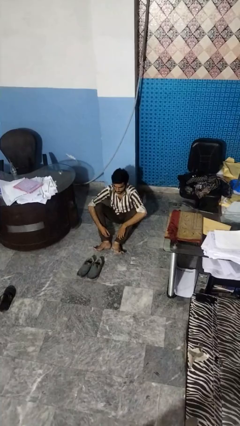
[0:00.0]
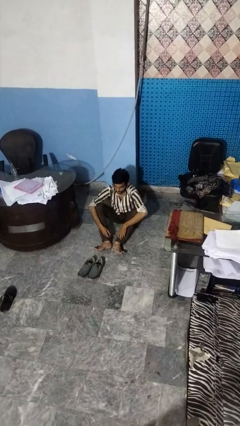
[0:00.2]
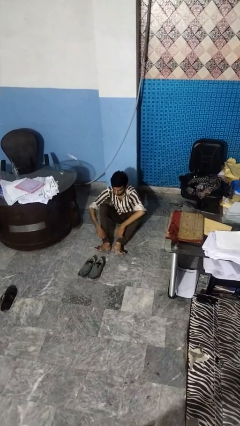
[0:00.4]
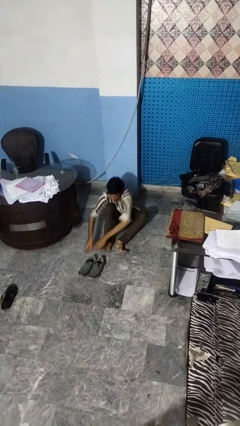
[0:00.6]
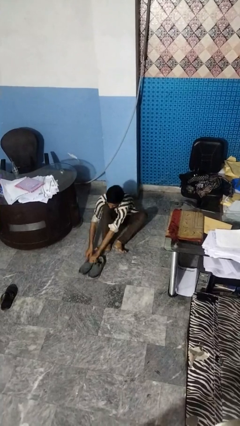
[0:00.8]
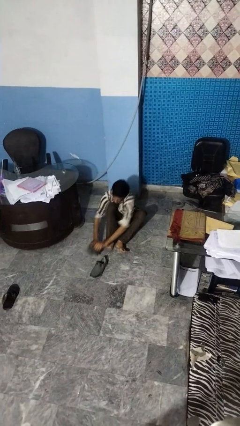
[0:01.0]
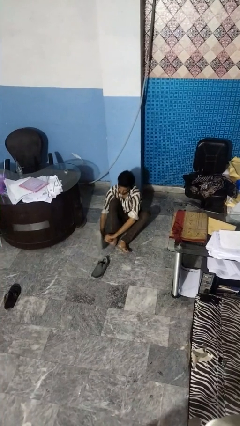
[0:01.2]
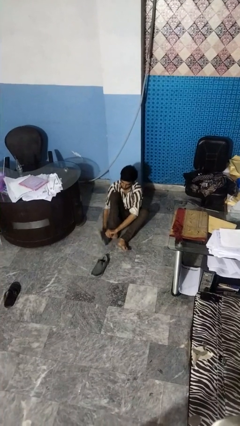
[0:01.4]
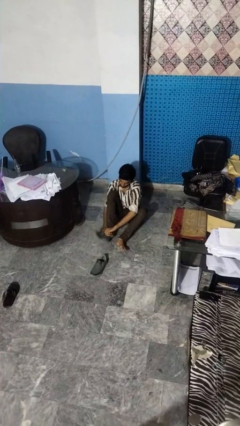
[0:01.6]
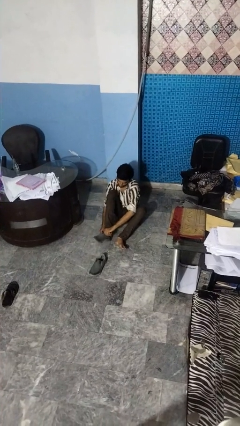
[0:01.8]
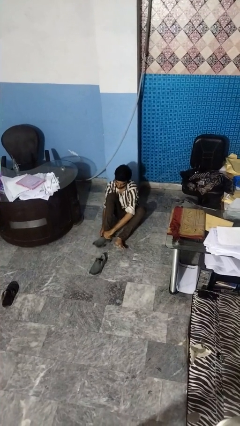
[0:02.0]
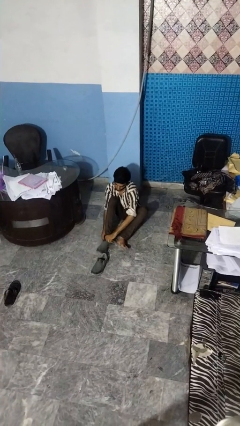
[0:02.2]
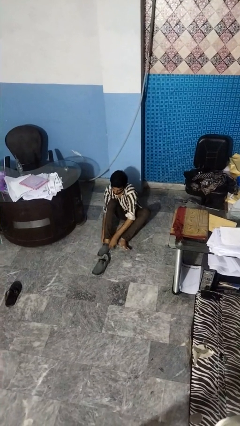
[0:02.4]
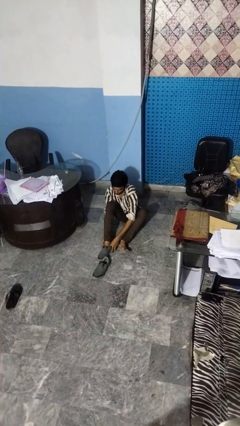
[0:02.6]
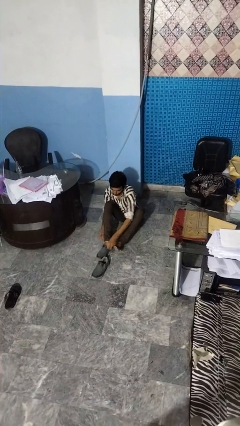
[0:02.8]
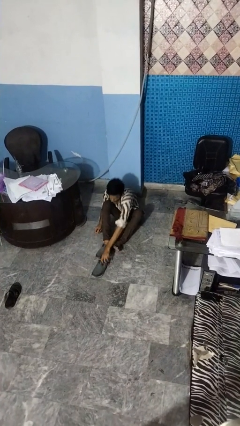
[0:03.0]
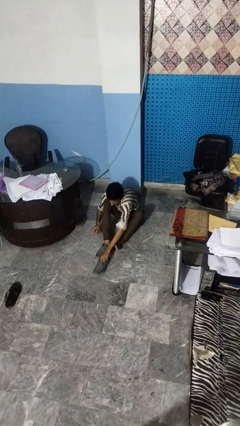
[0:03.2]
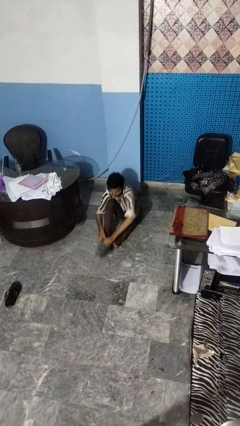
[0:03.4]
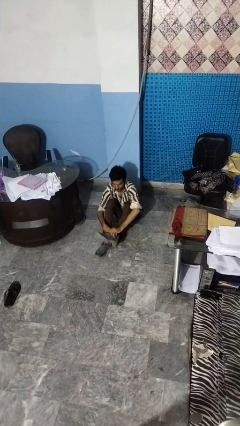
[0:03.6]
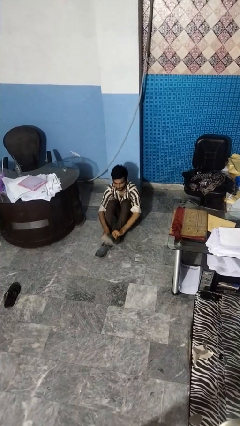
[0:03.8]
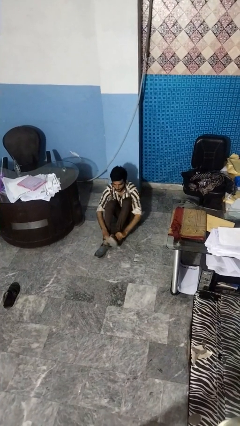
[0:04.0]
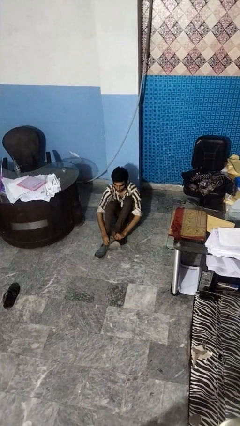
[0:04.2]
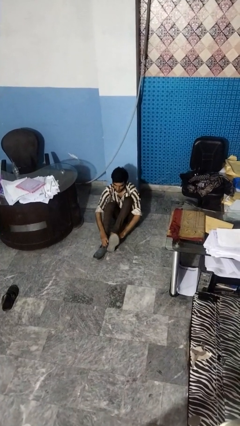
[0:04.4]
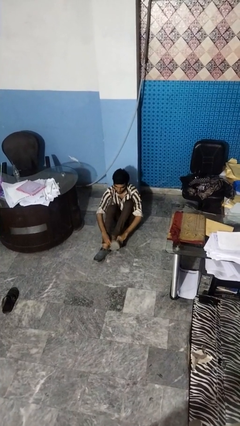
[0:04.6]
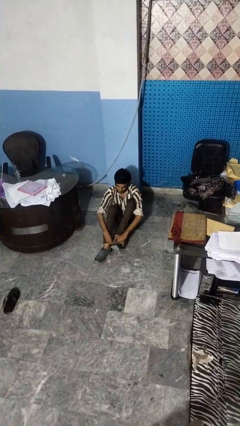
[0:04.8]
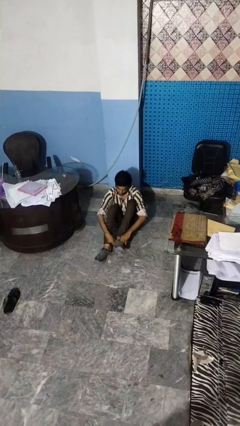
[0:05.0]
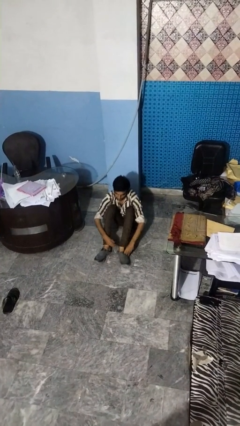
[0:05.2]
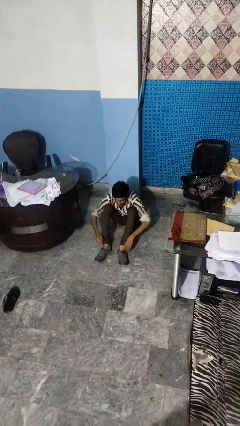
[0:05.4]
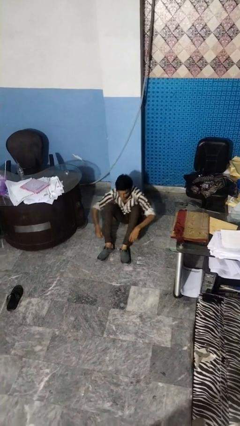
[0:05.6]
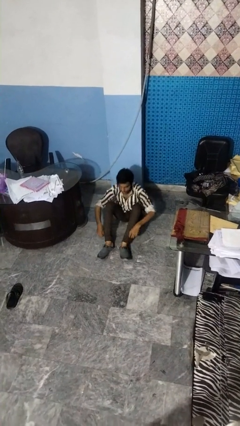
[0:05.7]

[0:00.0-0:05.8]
person puts on shoes

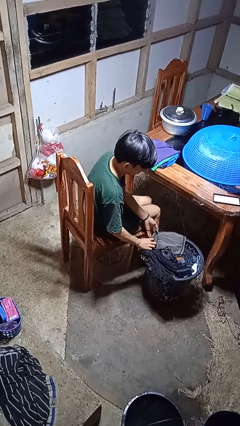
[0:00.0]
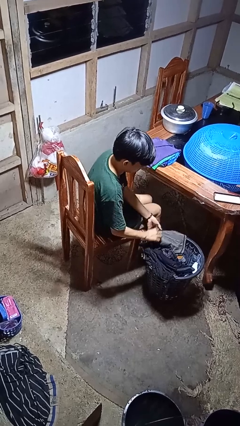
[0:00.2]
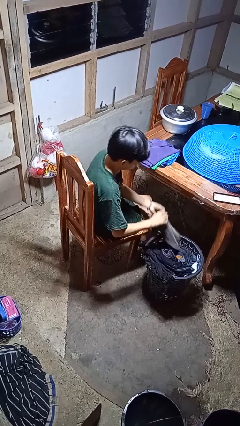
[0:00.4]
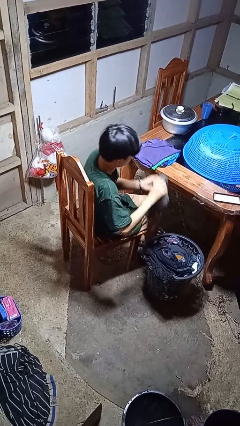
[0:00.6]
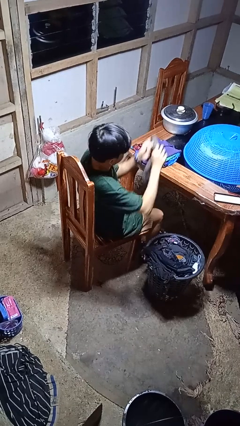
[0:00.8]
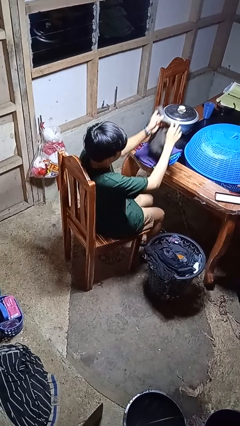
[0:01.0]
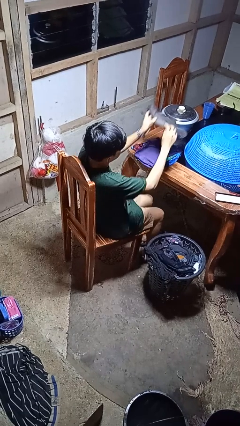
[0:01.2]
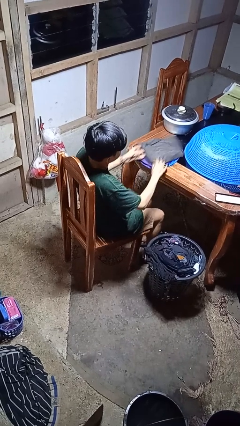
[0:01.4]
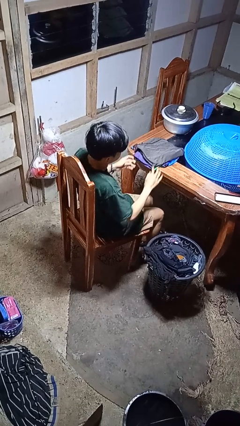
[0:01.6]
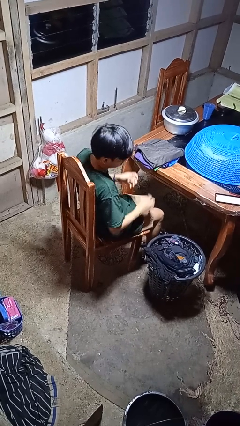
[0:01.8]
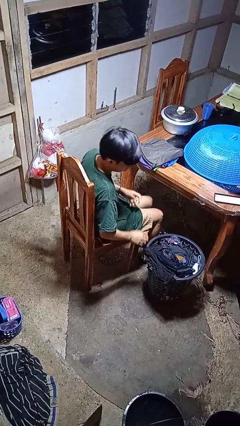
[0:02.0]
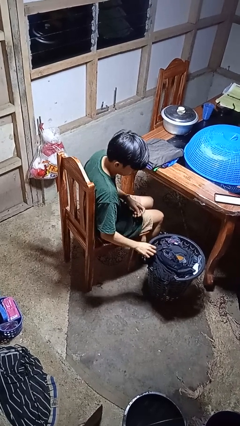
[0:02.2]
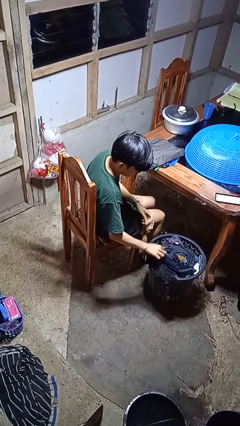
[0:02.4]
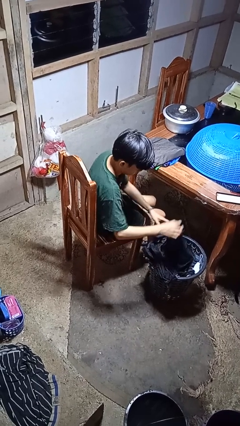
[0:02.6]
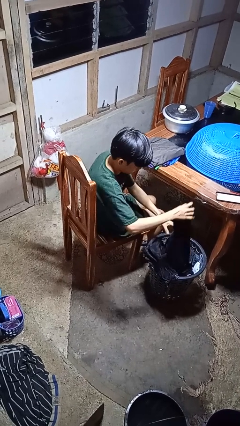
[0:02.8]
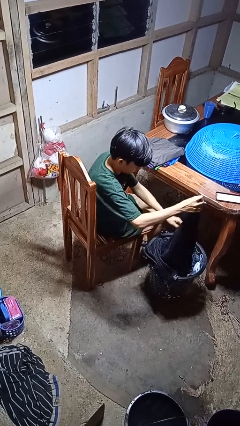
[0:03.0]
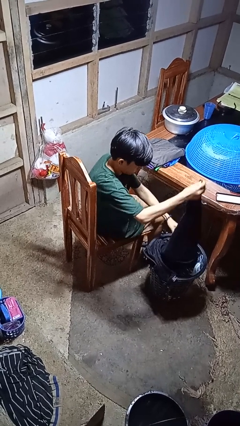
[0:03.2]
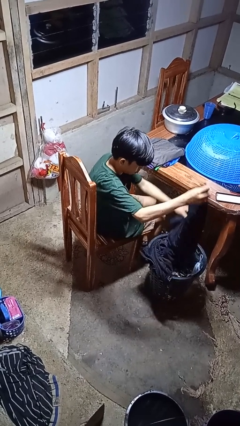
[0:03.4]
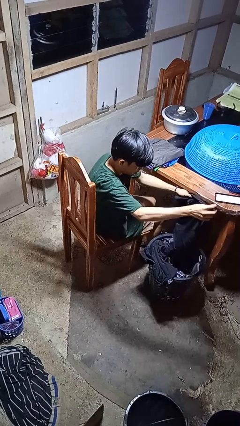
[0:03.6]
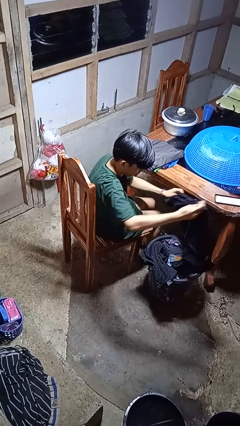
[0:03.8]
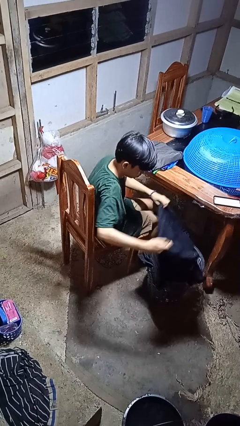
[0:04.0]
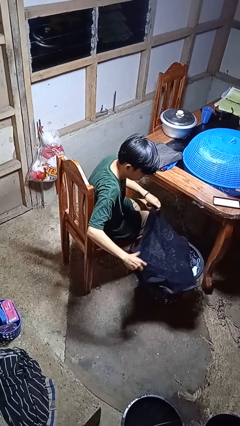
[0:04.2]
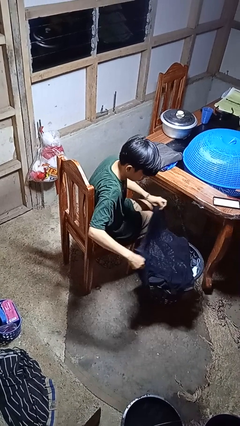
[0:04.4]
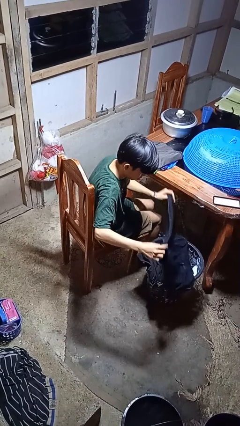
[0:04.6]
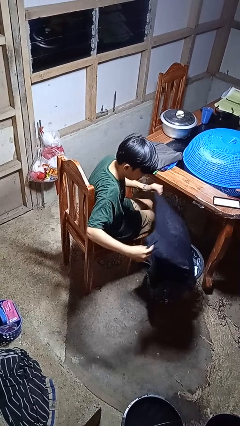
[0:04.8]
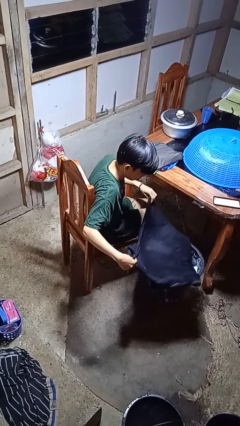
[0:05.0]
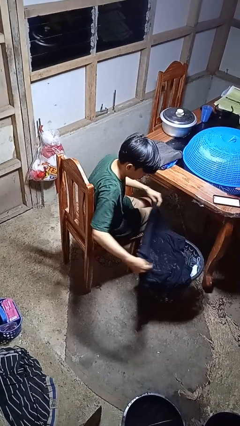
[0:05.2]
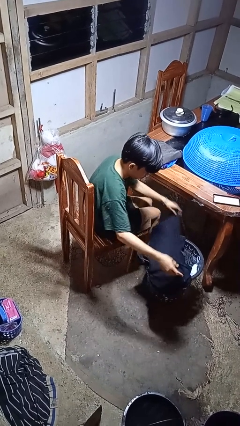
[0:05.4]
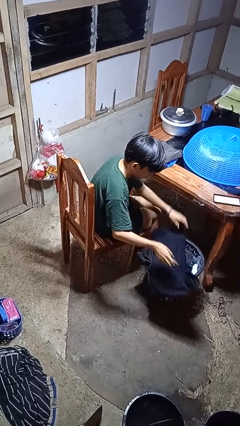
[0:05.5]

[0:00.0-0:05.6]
person folds shirt

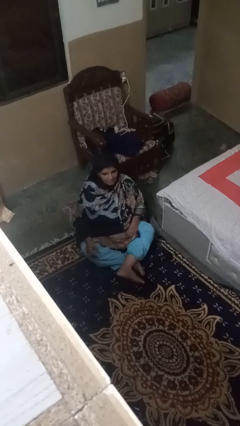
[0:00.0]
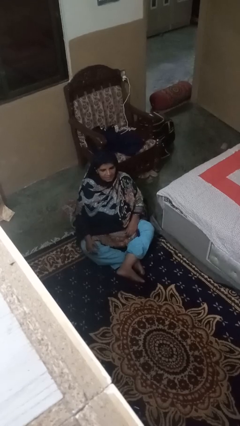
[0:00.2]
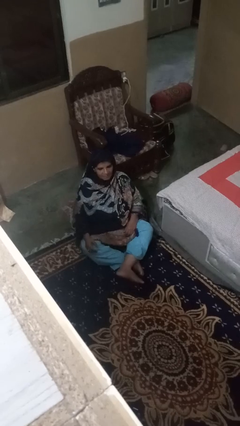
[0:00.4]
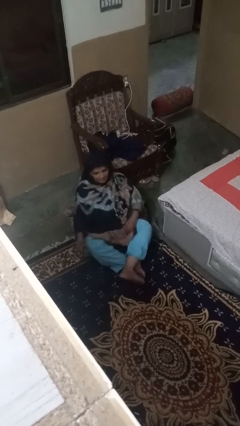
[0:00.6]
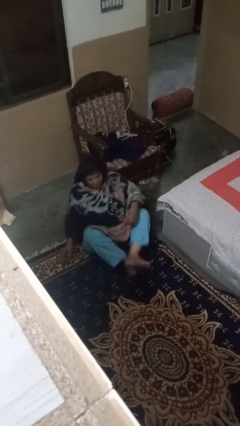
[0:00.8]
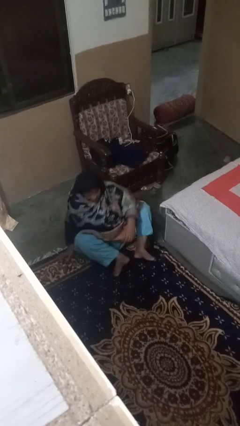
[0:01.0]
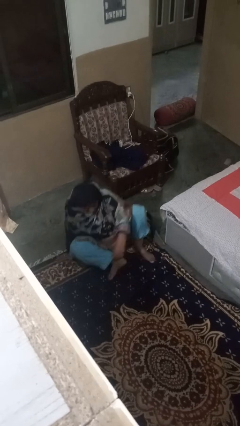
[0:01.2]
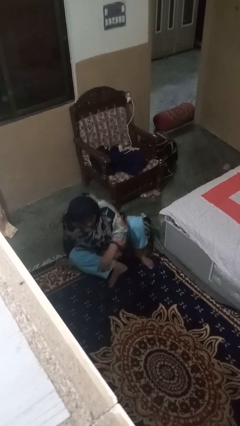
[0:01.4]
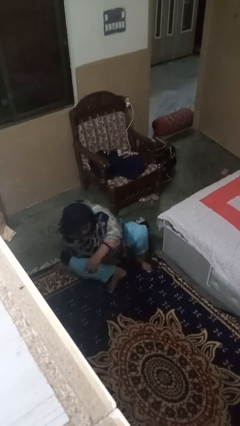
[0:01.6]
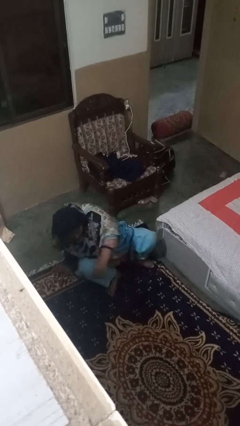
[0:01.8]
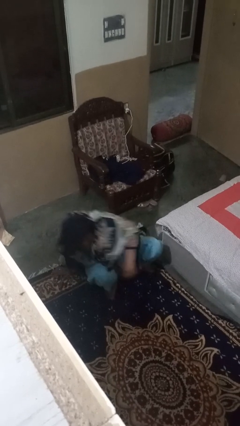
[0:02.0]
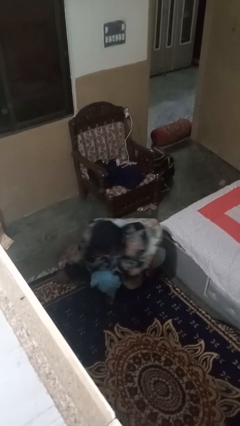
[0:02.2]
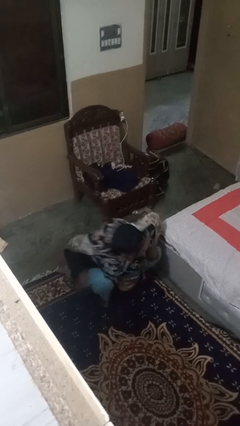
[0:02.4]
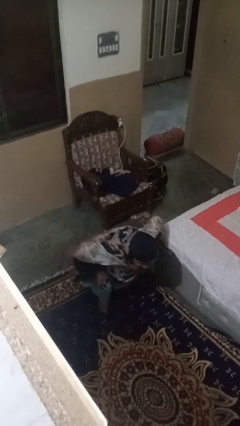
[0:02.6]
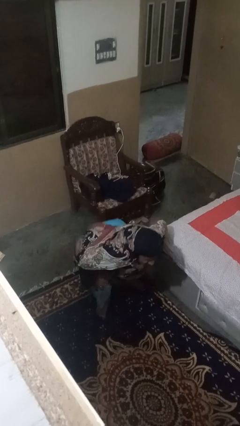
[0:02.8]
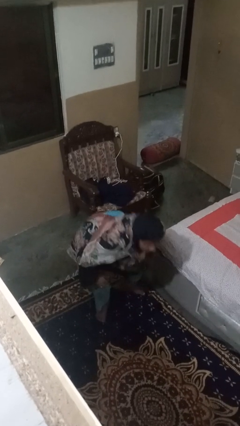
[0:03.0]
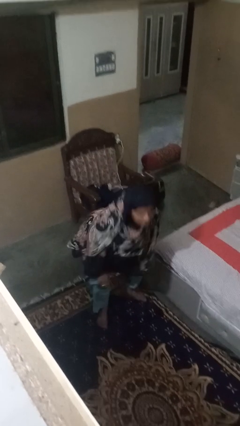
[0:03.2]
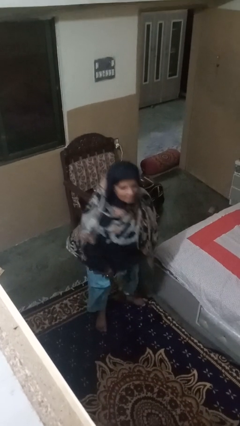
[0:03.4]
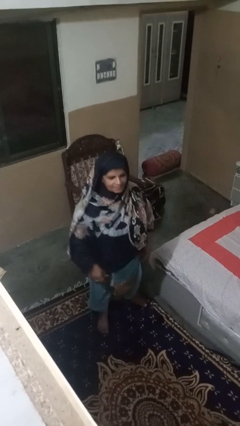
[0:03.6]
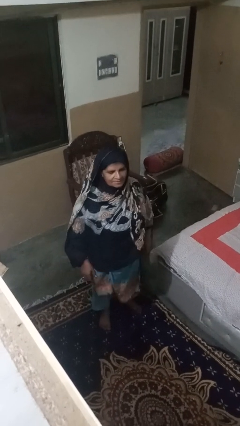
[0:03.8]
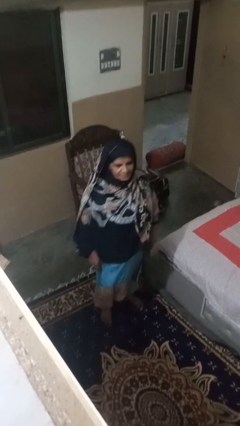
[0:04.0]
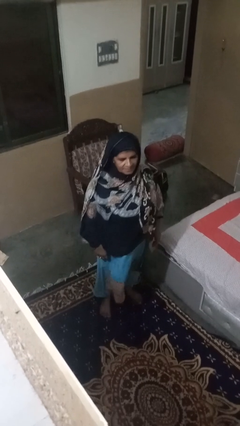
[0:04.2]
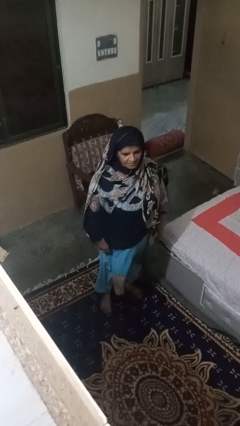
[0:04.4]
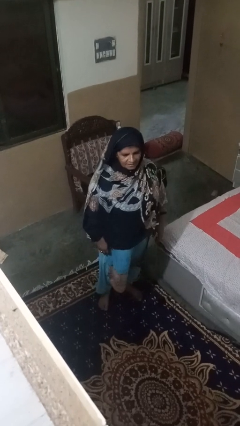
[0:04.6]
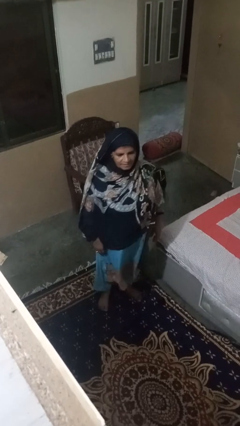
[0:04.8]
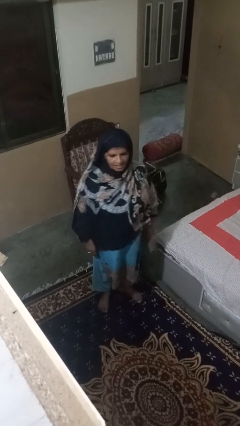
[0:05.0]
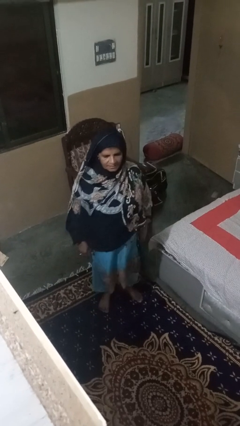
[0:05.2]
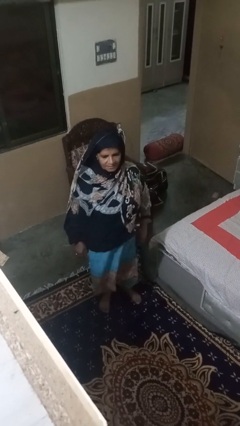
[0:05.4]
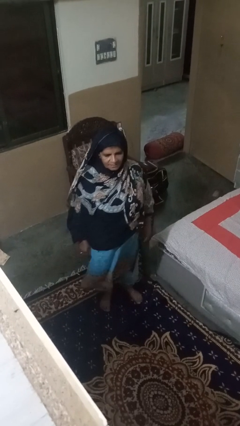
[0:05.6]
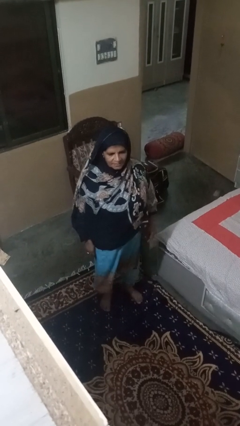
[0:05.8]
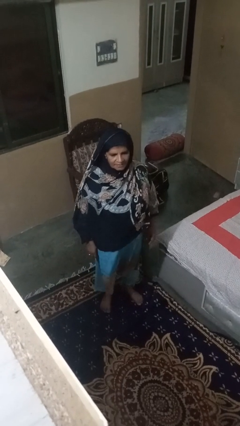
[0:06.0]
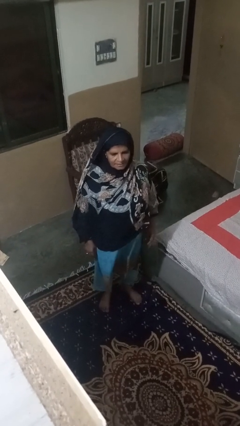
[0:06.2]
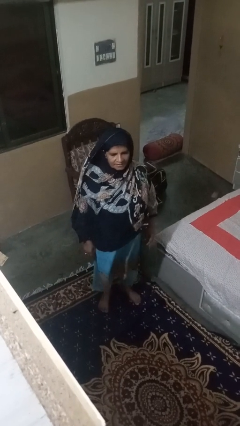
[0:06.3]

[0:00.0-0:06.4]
person stands up from floor

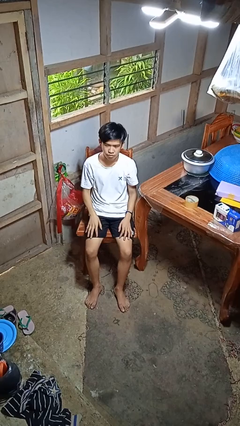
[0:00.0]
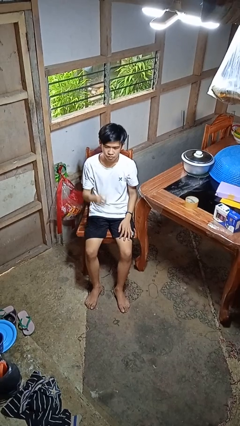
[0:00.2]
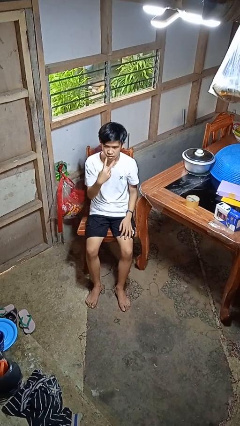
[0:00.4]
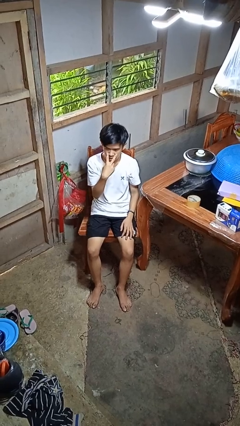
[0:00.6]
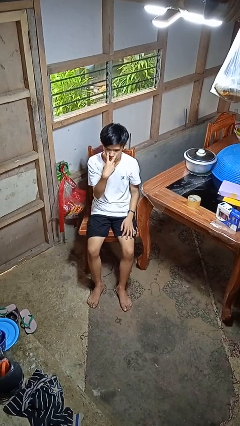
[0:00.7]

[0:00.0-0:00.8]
person gestures watch closely
